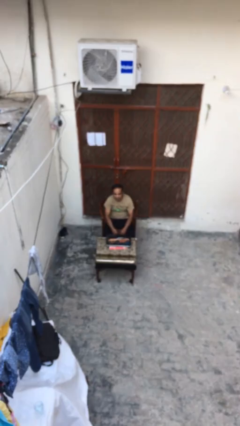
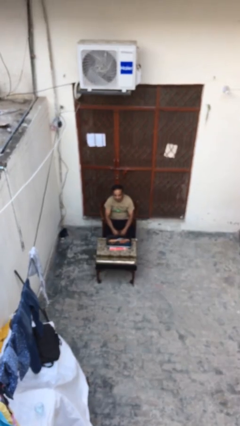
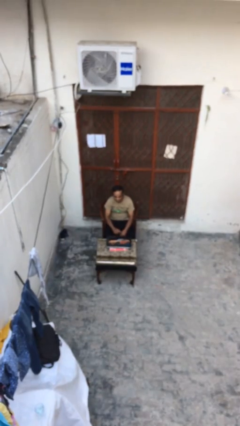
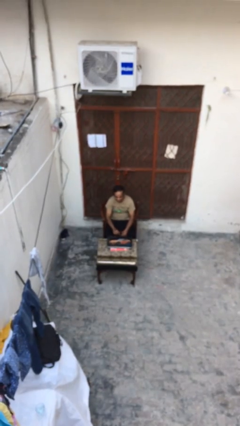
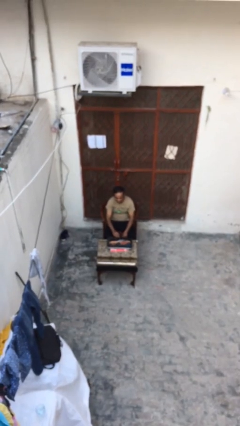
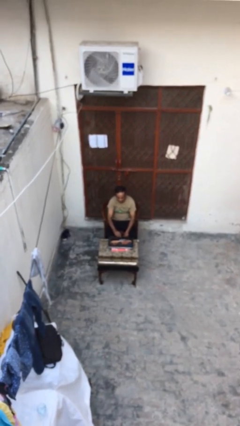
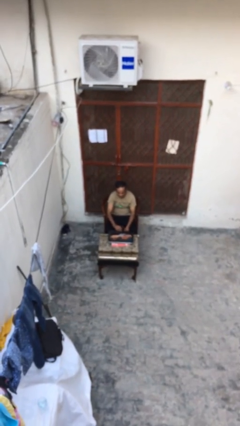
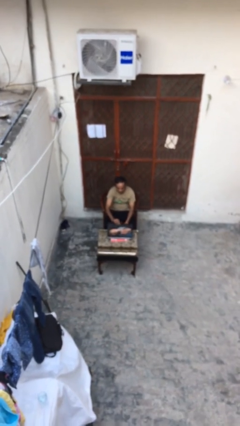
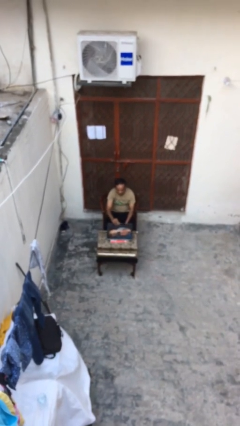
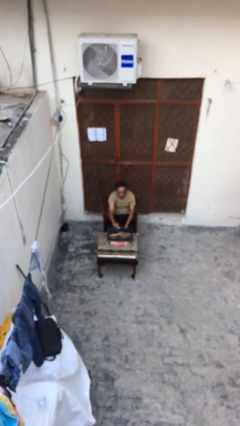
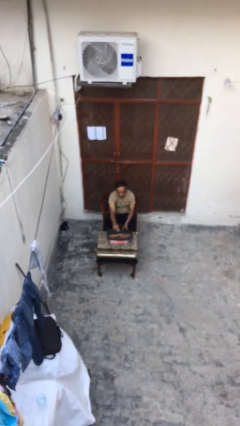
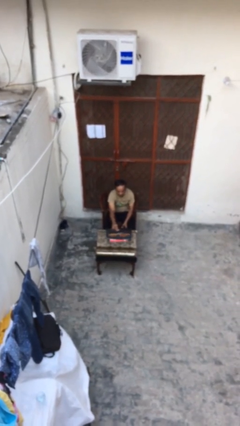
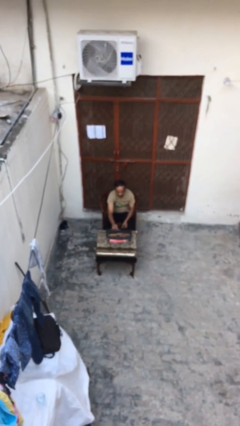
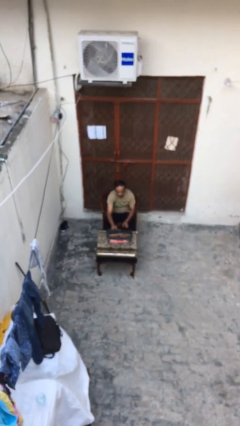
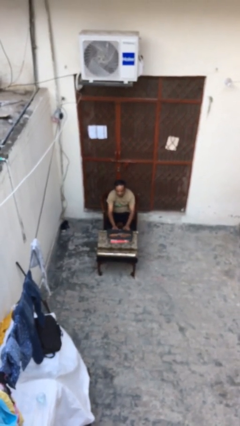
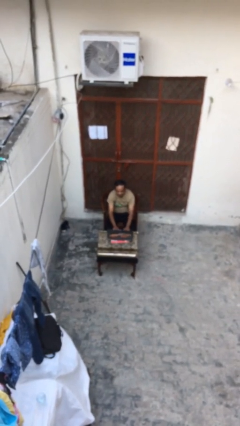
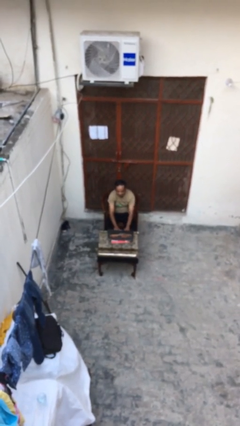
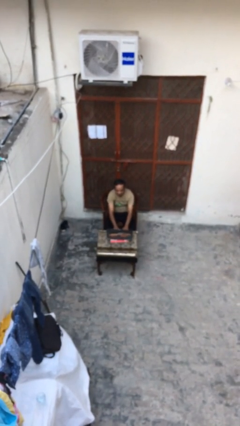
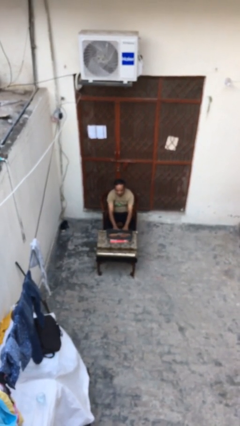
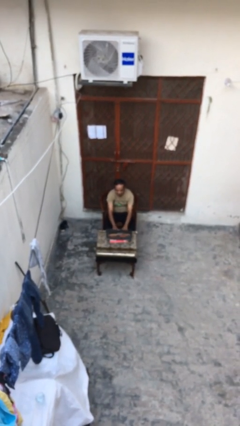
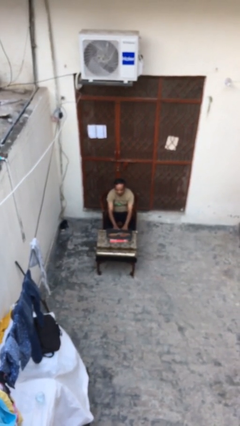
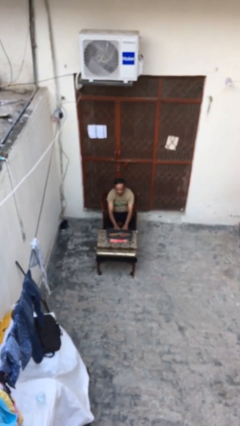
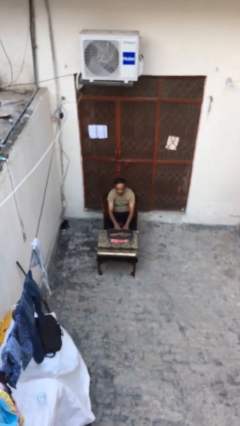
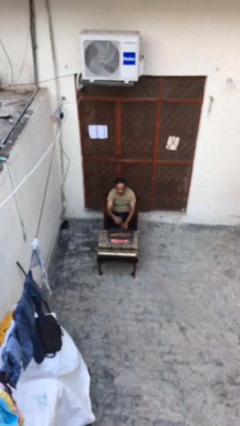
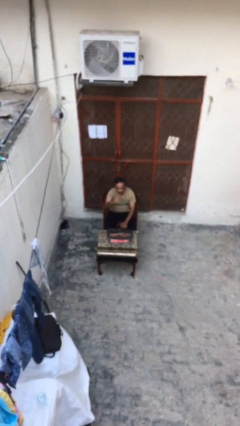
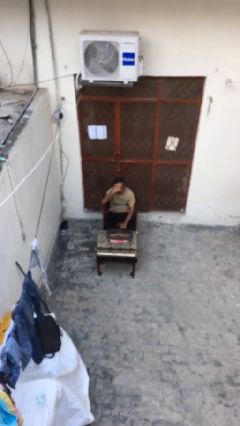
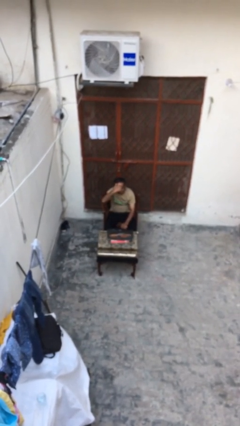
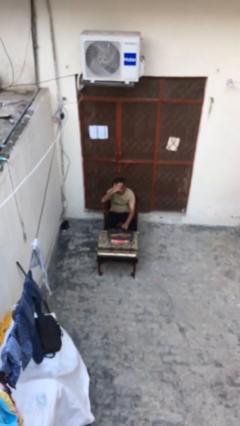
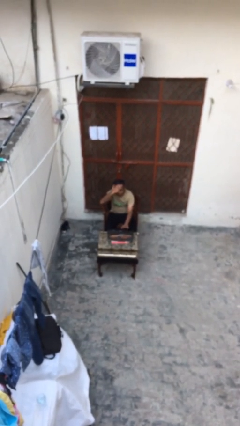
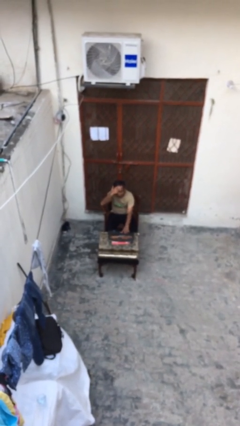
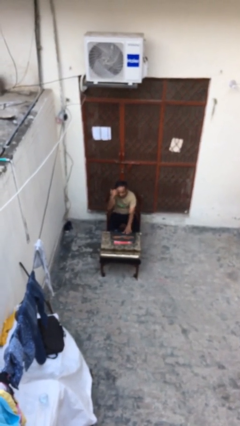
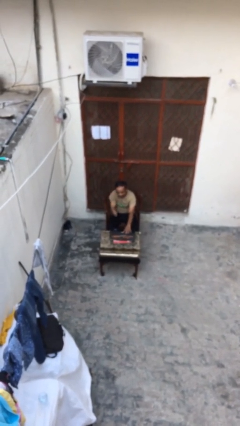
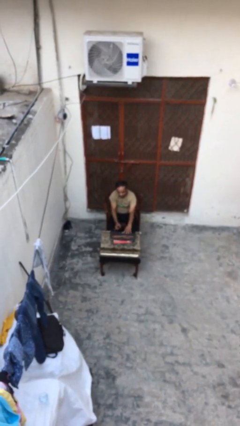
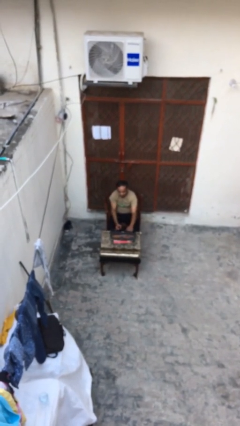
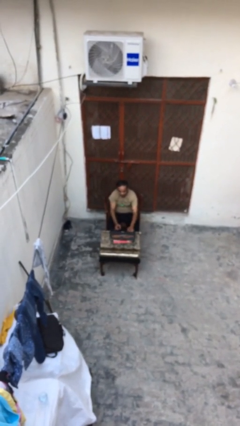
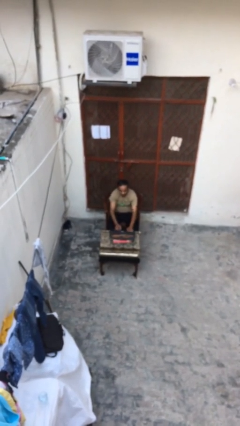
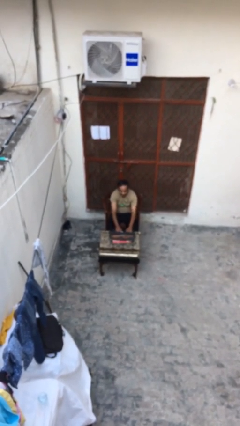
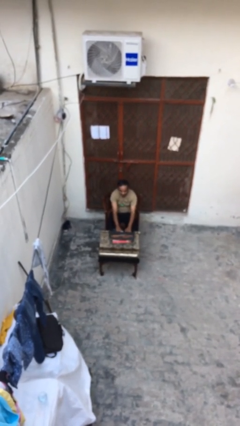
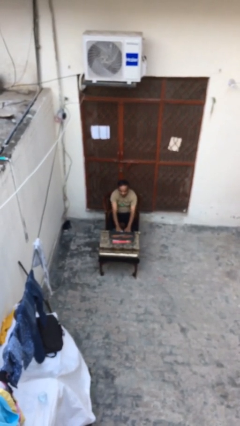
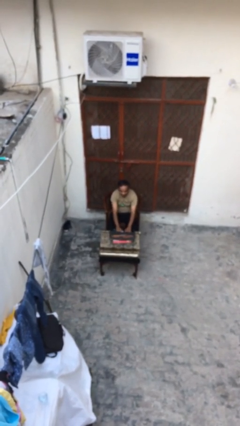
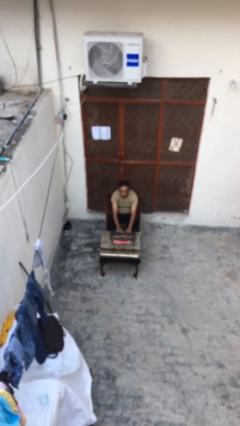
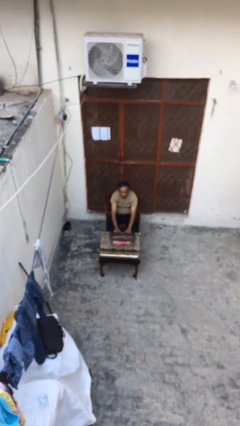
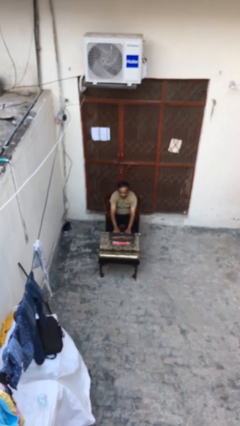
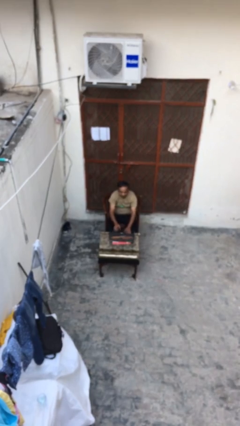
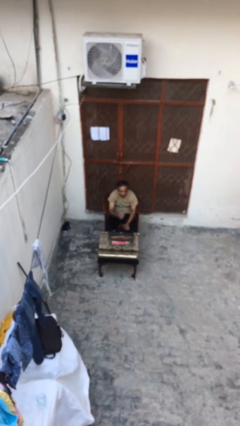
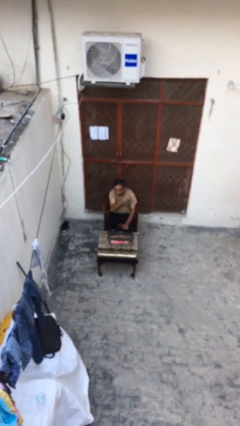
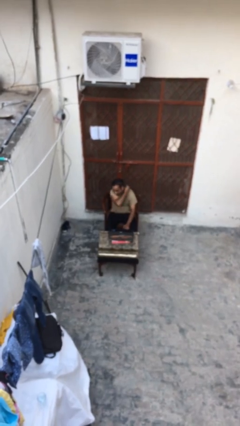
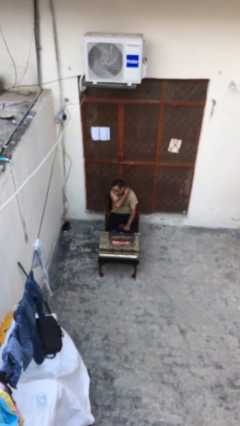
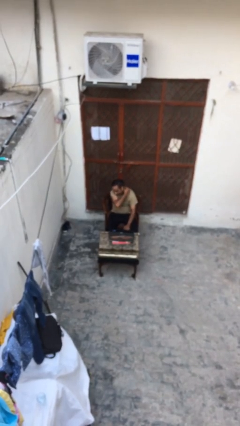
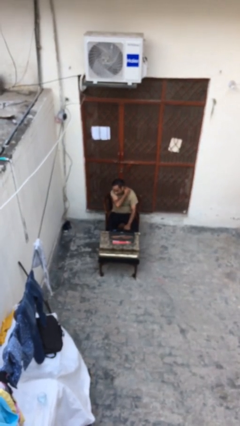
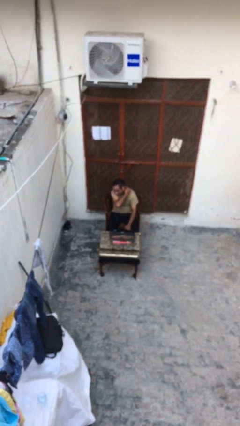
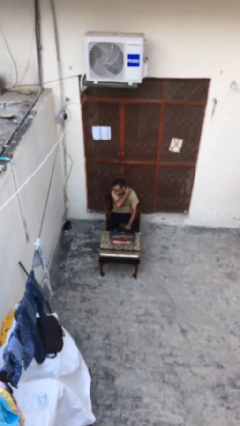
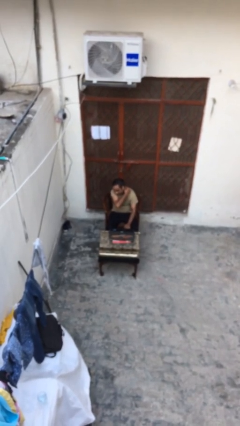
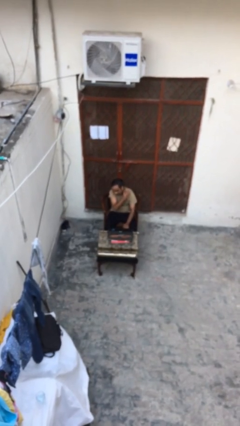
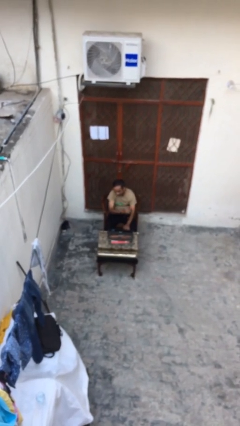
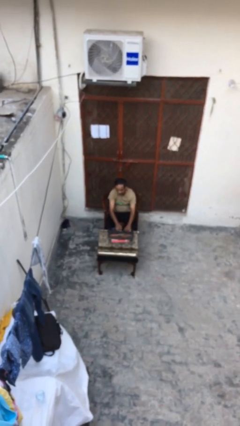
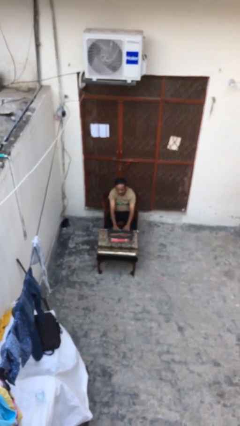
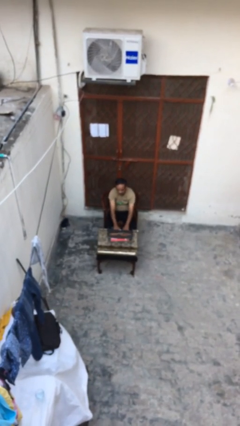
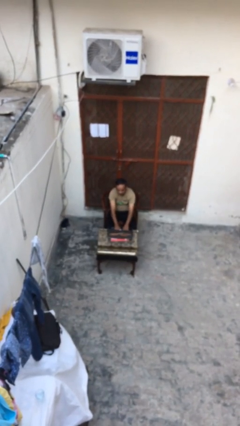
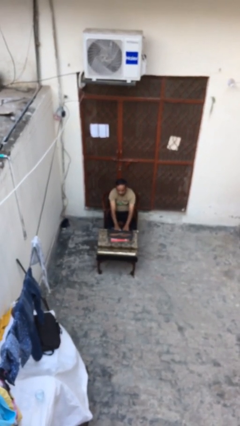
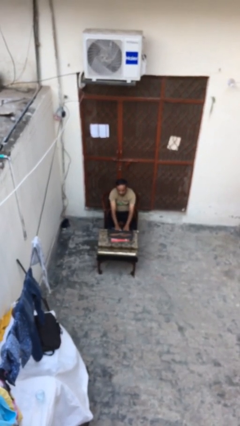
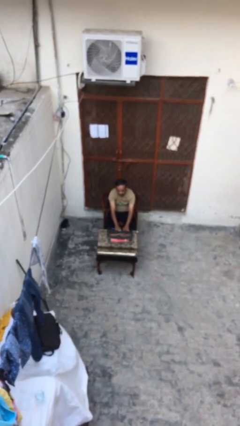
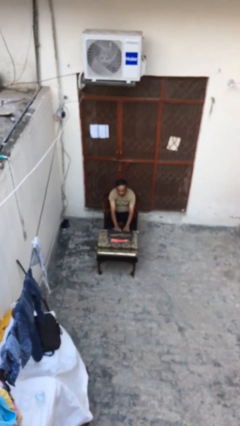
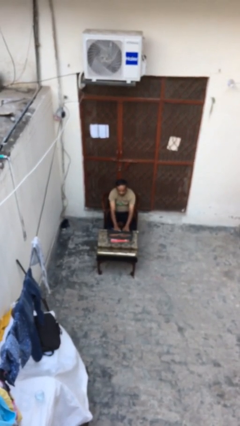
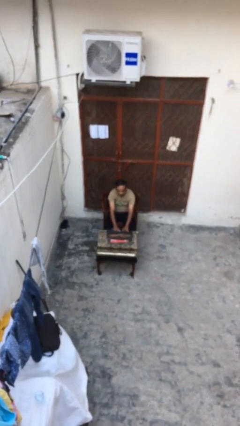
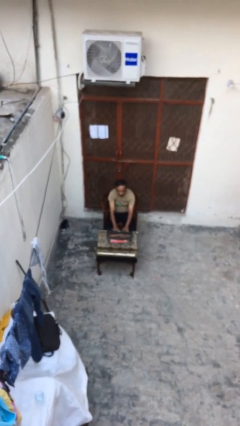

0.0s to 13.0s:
person interacts with laptop

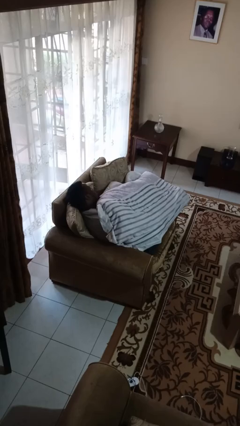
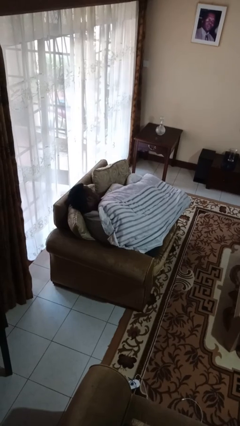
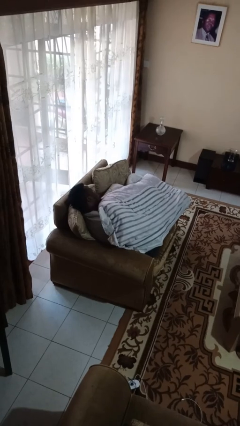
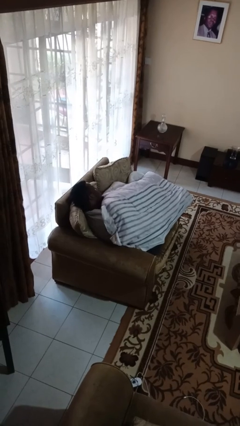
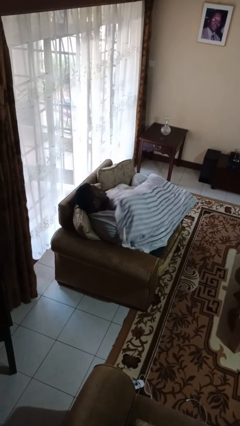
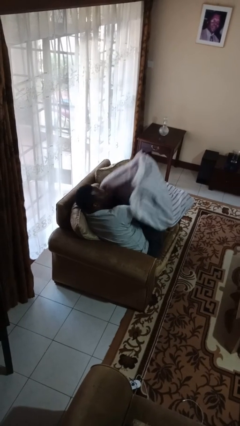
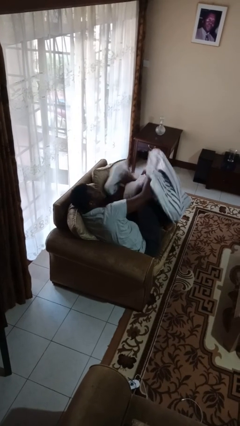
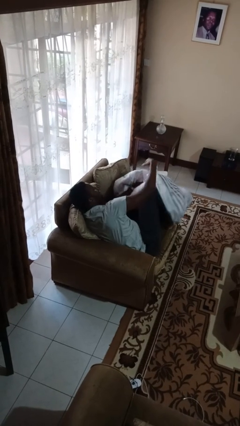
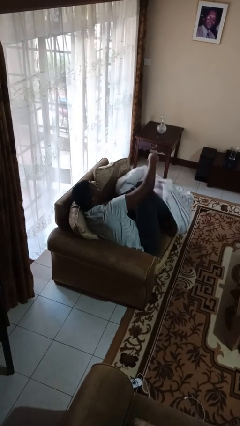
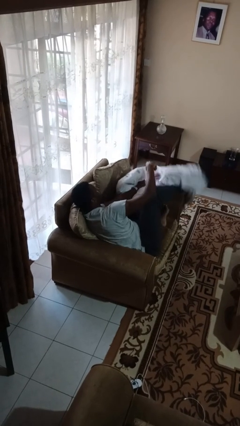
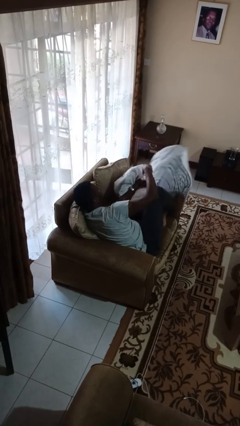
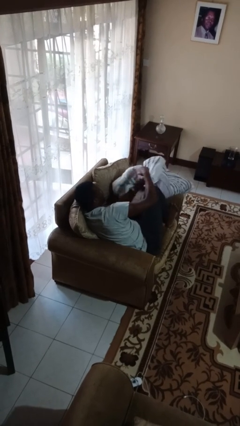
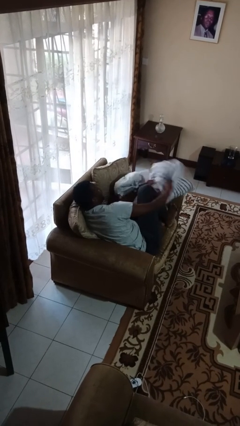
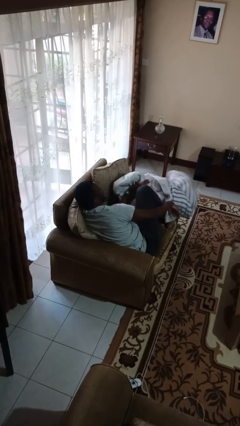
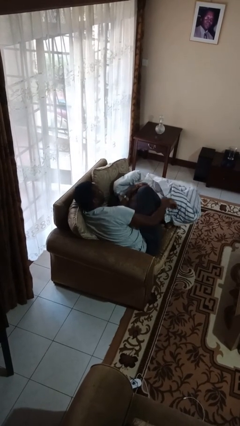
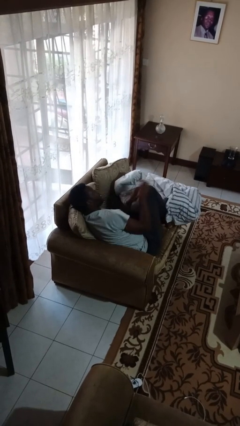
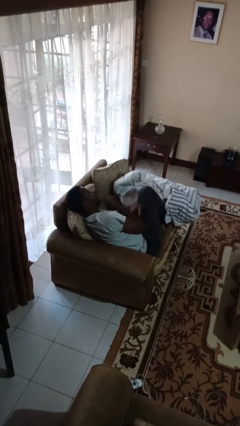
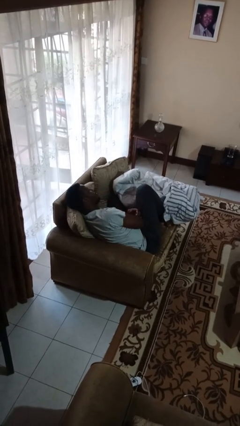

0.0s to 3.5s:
person uncovers with blanket

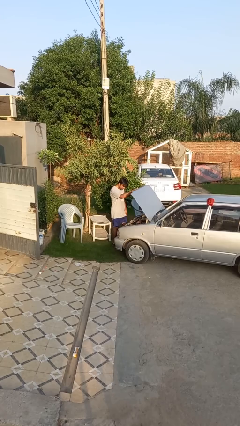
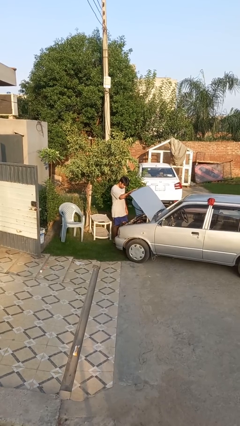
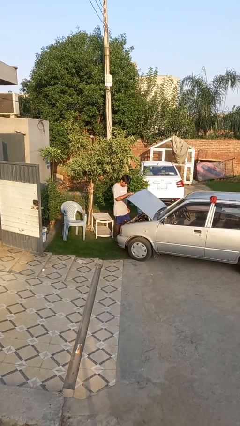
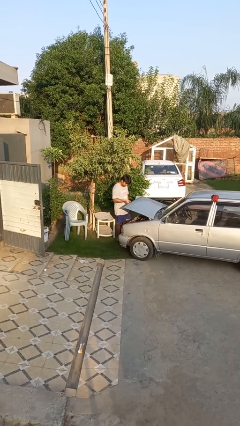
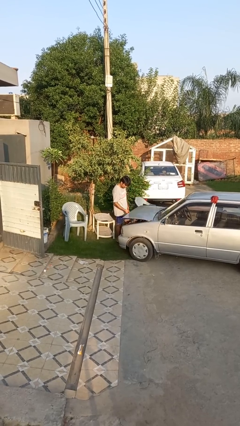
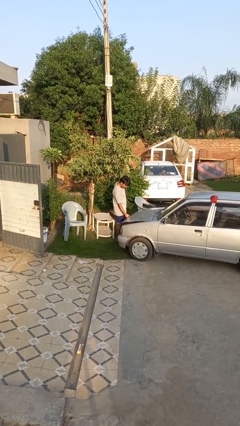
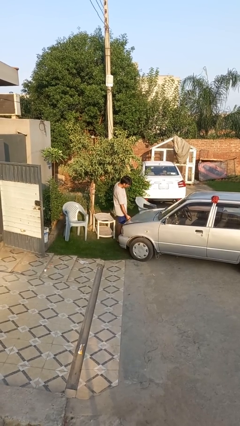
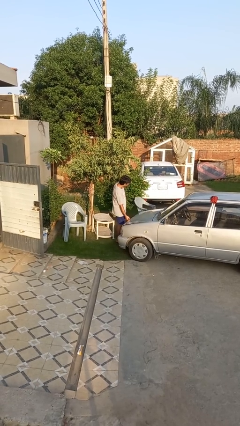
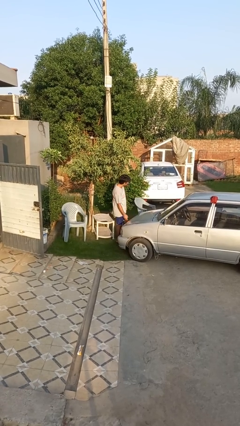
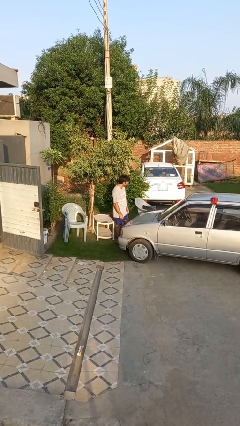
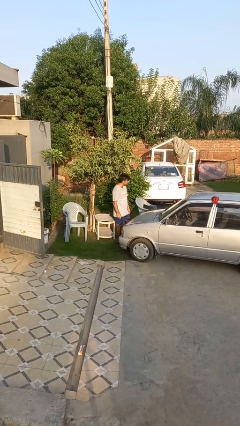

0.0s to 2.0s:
person closes car hood
